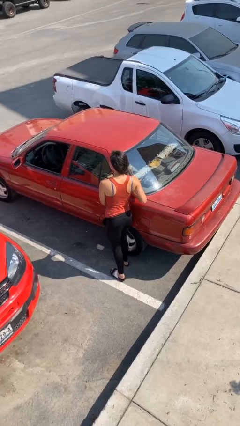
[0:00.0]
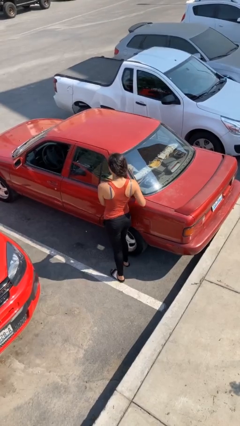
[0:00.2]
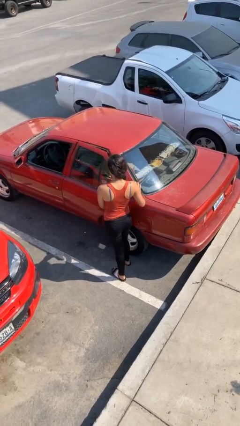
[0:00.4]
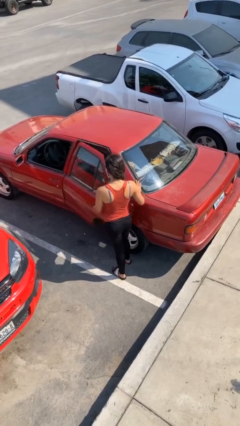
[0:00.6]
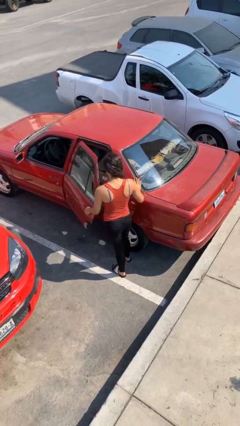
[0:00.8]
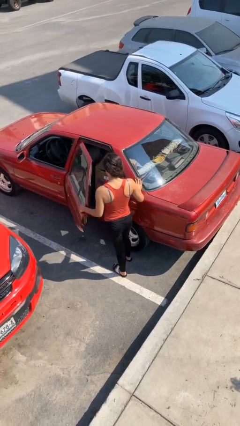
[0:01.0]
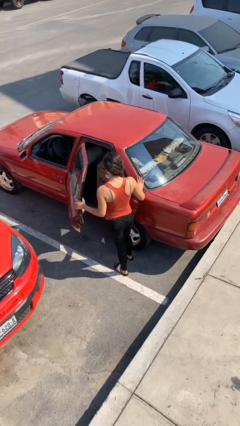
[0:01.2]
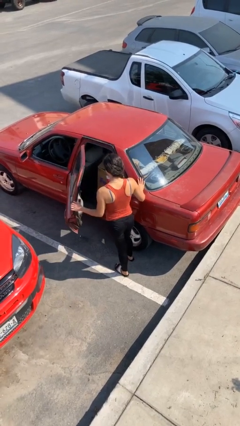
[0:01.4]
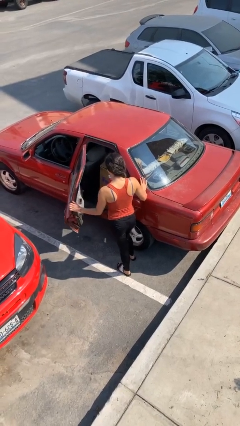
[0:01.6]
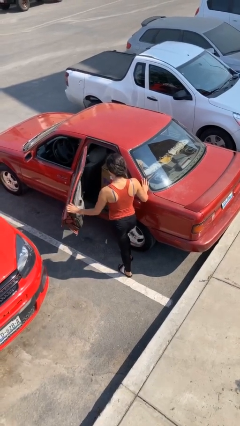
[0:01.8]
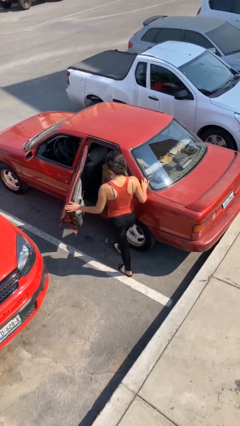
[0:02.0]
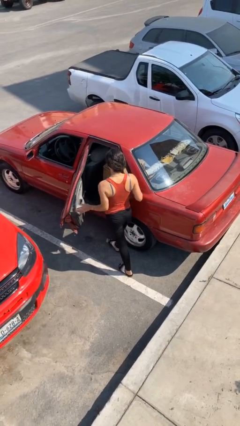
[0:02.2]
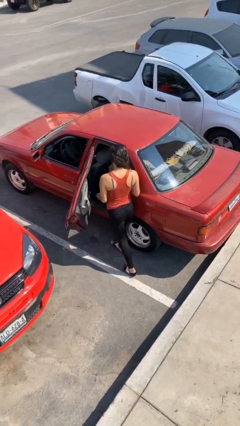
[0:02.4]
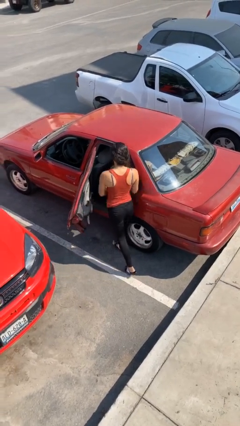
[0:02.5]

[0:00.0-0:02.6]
person opens car door

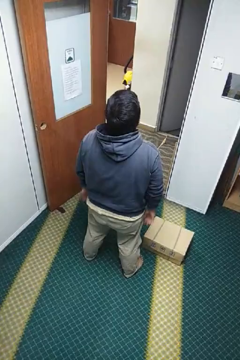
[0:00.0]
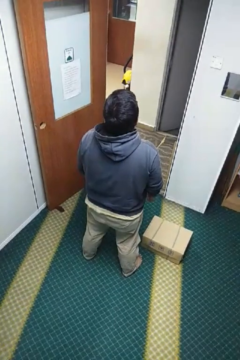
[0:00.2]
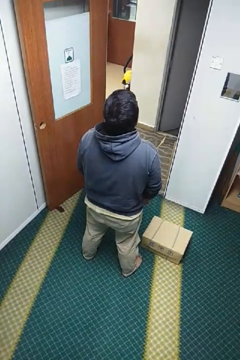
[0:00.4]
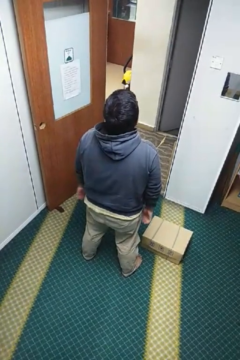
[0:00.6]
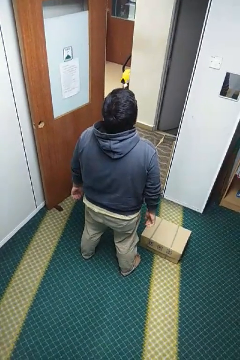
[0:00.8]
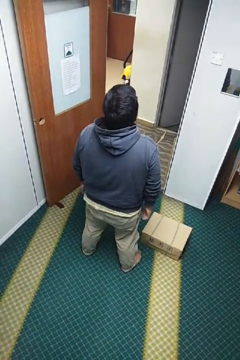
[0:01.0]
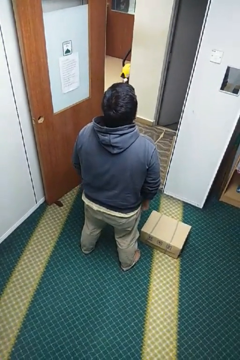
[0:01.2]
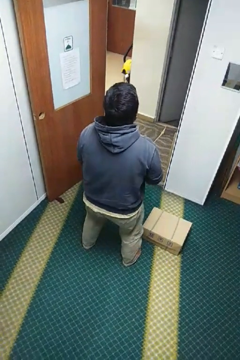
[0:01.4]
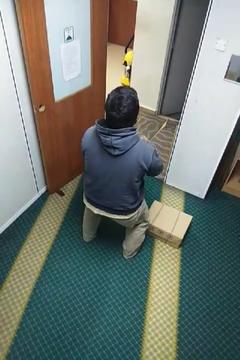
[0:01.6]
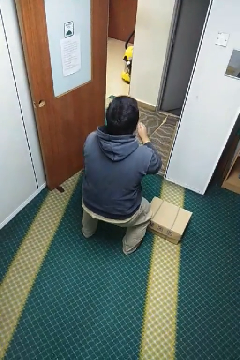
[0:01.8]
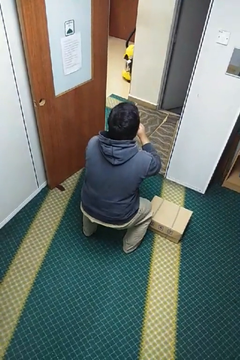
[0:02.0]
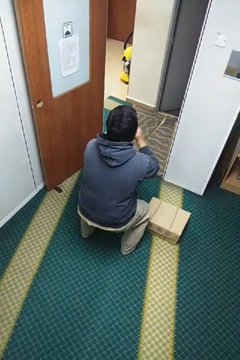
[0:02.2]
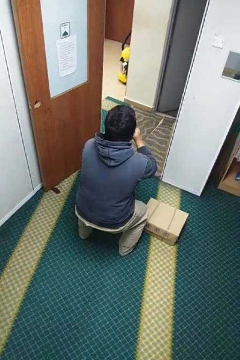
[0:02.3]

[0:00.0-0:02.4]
person squats

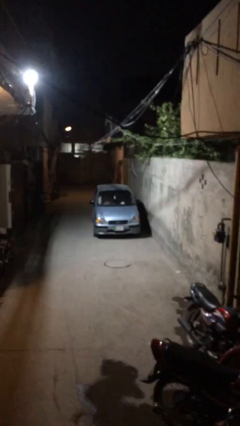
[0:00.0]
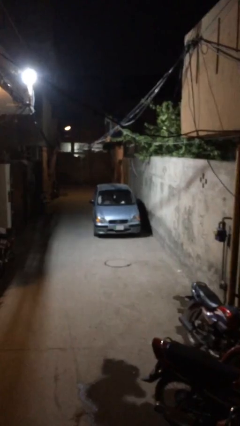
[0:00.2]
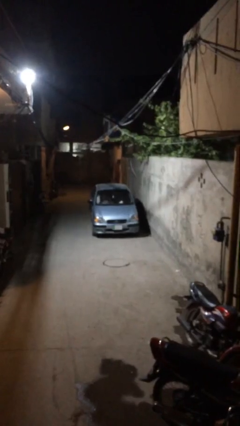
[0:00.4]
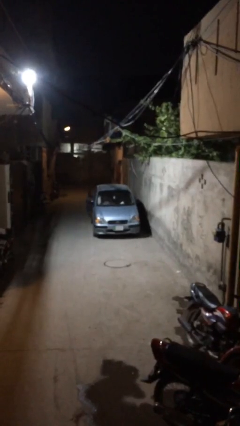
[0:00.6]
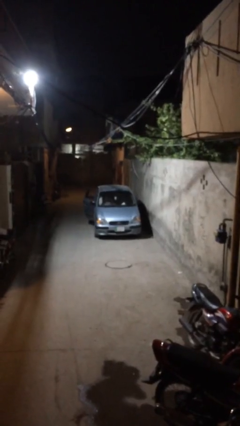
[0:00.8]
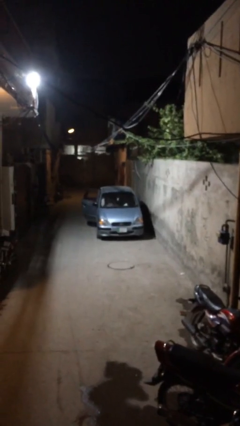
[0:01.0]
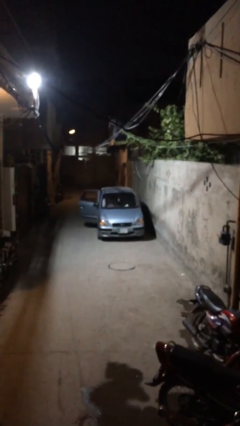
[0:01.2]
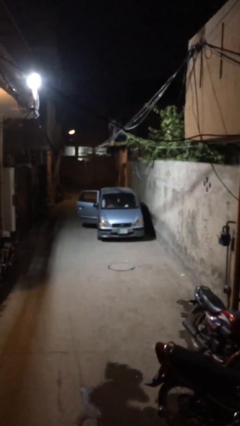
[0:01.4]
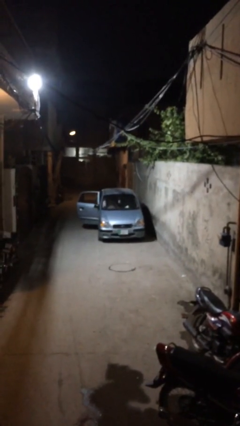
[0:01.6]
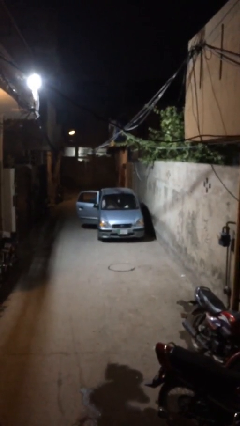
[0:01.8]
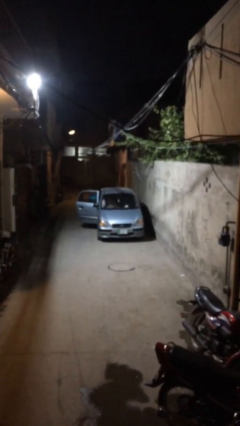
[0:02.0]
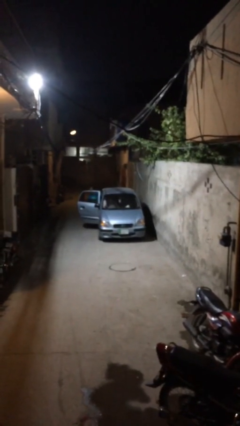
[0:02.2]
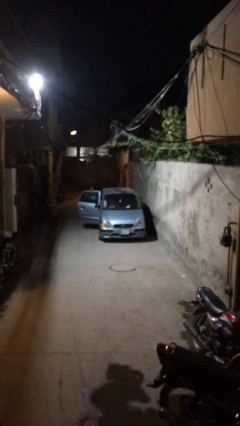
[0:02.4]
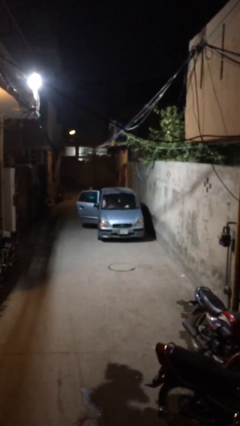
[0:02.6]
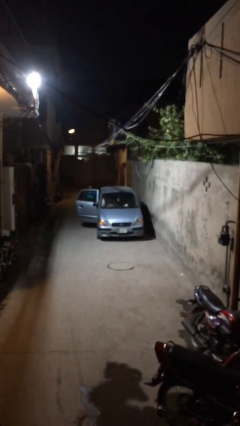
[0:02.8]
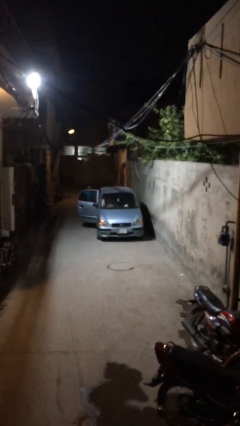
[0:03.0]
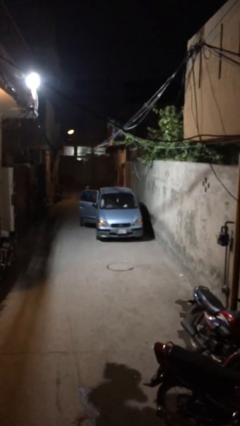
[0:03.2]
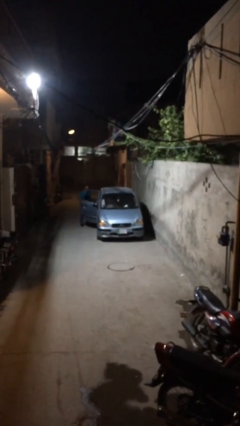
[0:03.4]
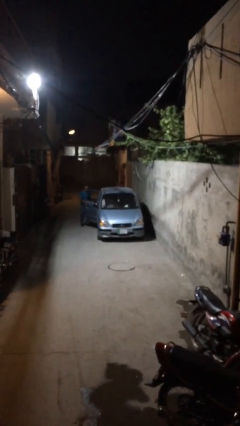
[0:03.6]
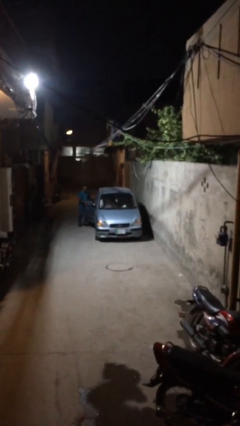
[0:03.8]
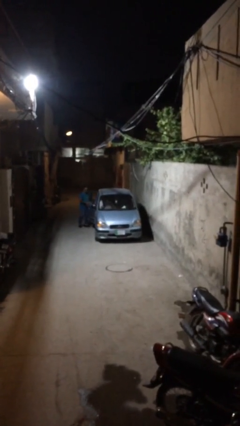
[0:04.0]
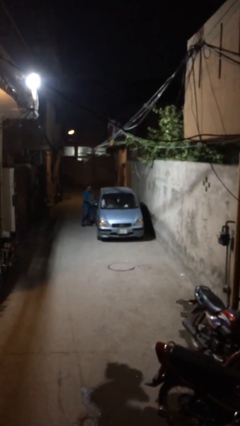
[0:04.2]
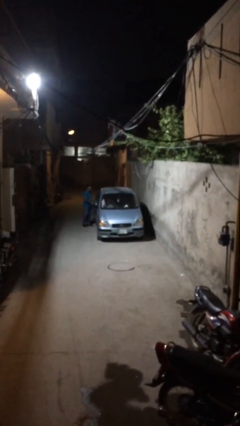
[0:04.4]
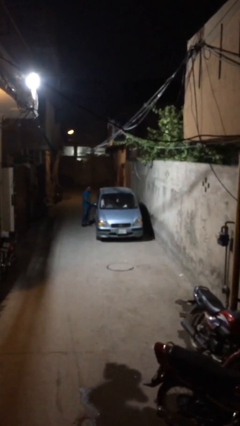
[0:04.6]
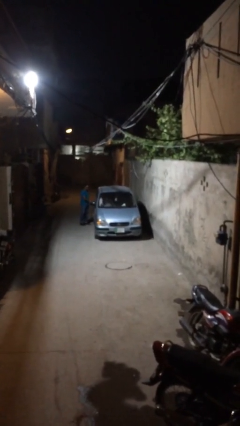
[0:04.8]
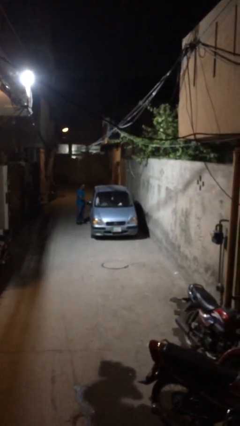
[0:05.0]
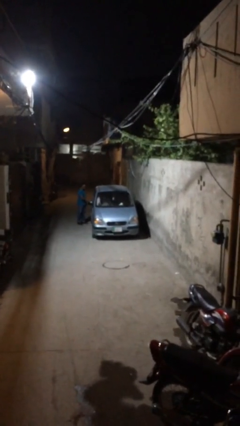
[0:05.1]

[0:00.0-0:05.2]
car drops off person

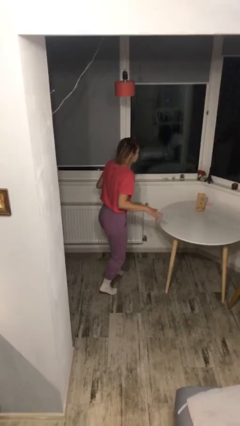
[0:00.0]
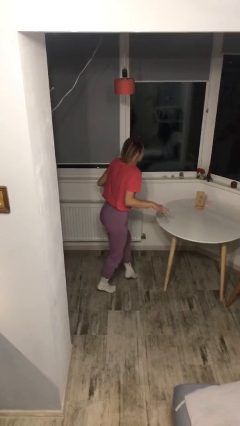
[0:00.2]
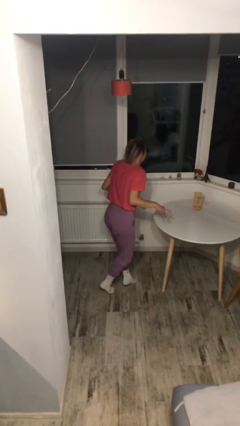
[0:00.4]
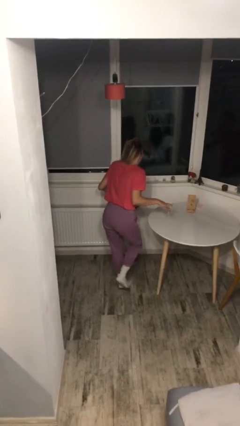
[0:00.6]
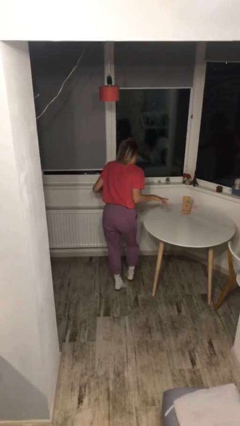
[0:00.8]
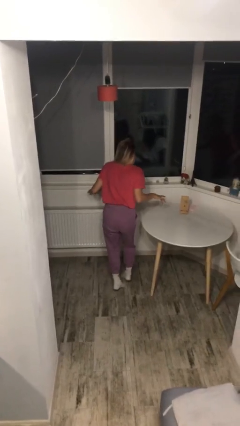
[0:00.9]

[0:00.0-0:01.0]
person walks tiptoe

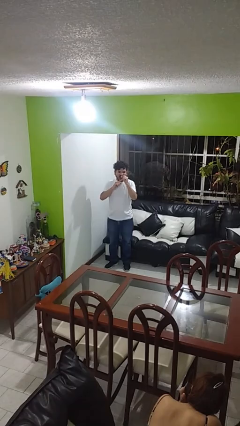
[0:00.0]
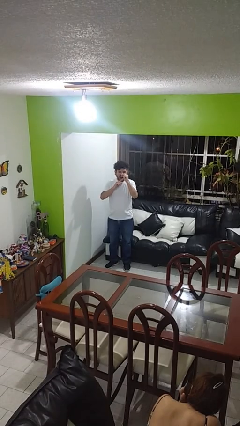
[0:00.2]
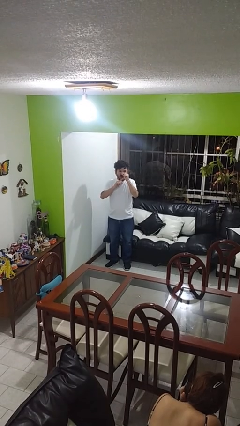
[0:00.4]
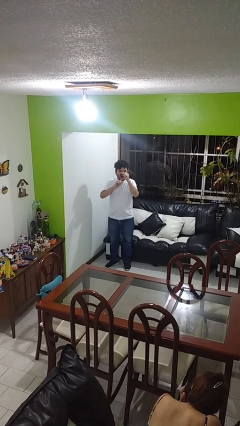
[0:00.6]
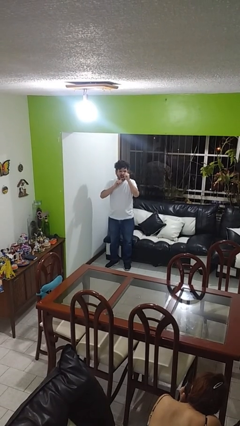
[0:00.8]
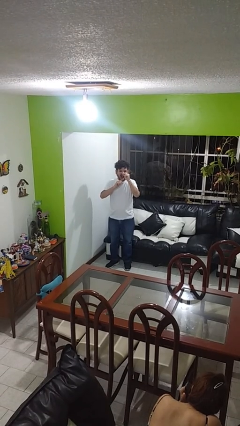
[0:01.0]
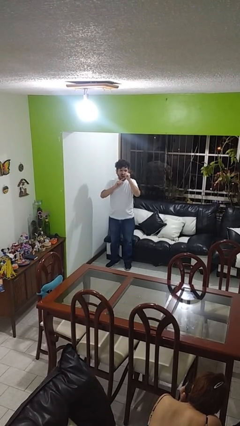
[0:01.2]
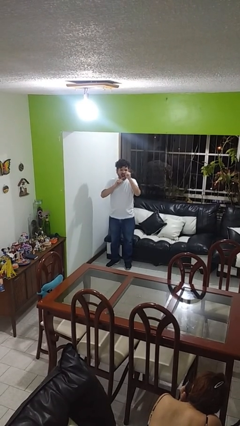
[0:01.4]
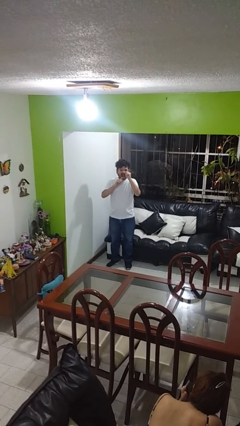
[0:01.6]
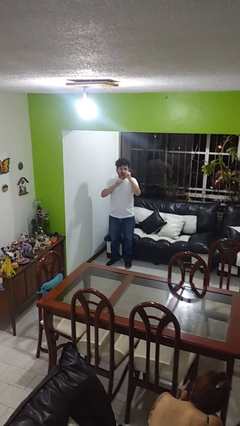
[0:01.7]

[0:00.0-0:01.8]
person flosses

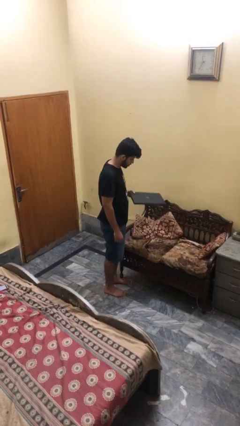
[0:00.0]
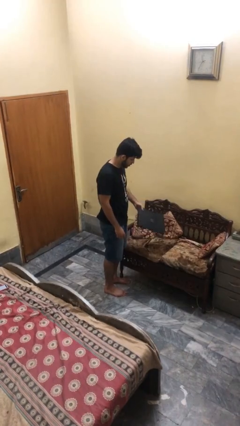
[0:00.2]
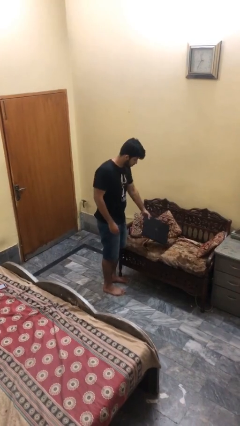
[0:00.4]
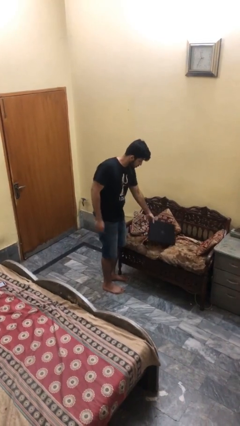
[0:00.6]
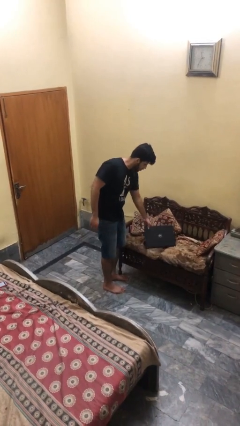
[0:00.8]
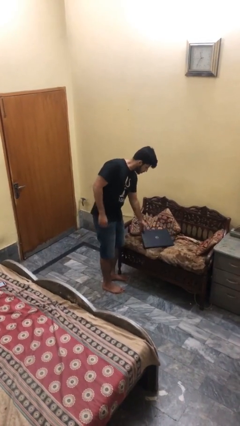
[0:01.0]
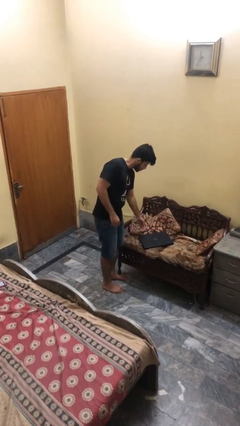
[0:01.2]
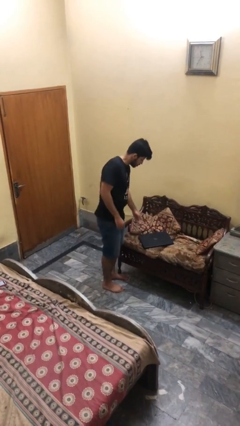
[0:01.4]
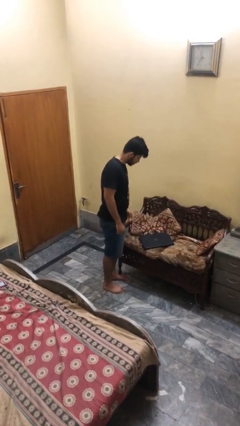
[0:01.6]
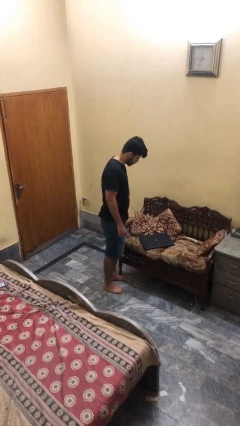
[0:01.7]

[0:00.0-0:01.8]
person puts down object on couch

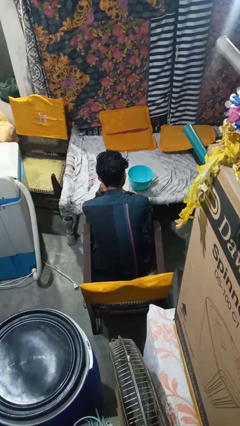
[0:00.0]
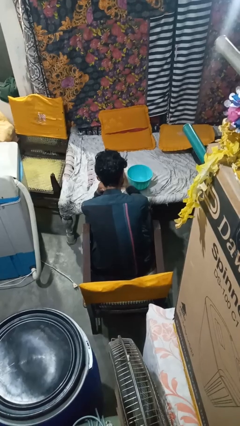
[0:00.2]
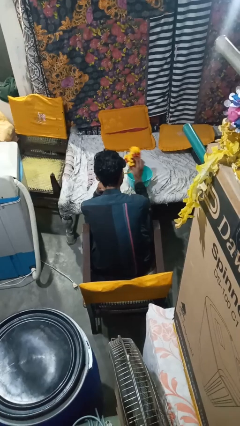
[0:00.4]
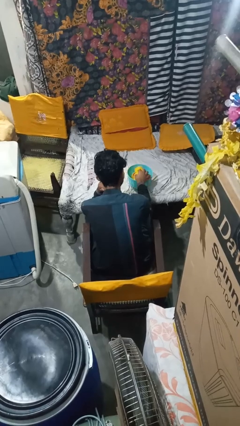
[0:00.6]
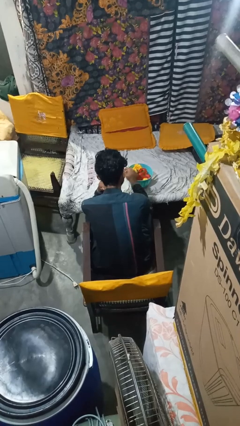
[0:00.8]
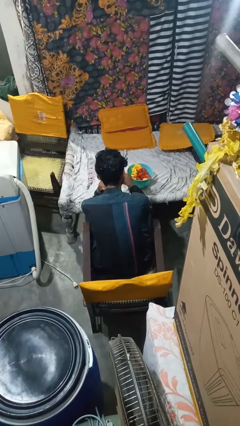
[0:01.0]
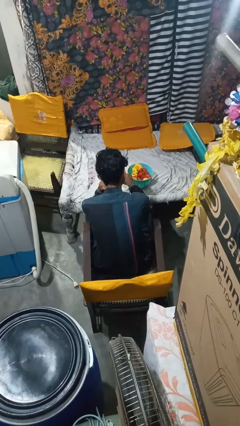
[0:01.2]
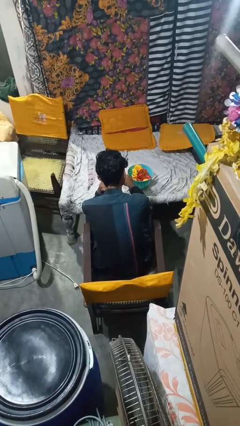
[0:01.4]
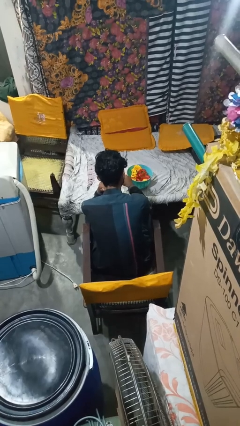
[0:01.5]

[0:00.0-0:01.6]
person pours into bowl

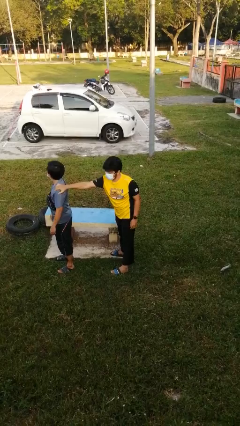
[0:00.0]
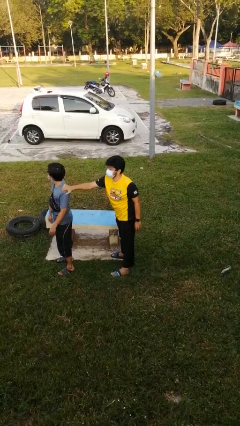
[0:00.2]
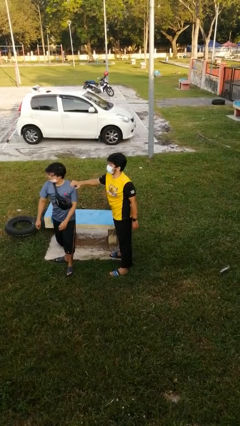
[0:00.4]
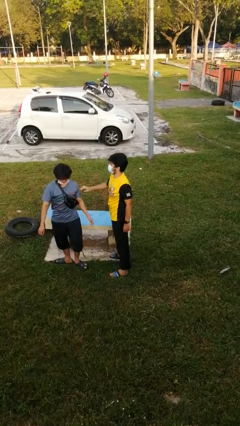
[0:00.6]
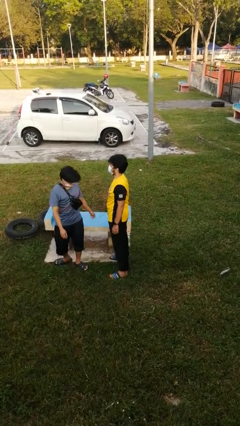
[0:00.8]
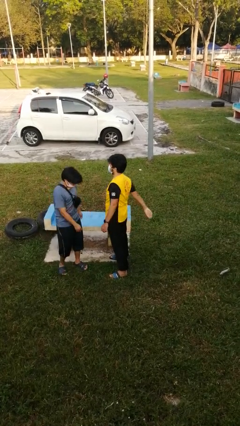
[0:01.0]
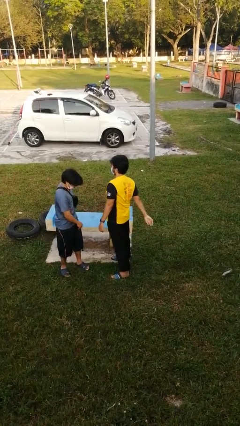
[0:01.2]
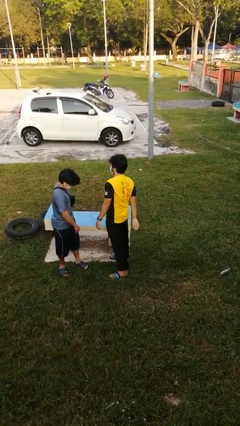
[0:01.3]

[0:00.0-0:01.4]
person spins person around
